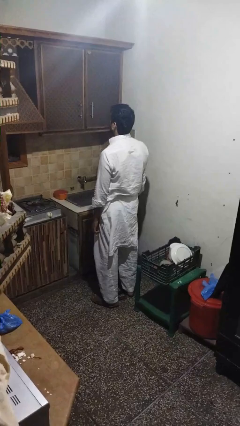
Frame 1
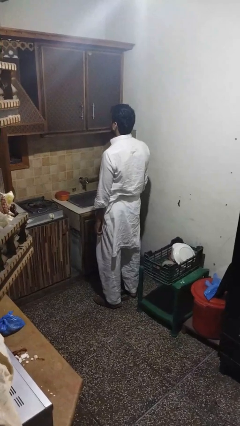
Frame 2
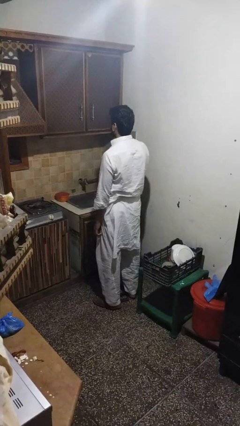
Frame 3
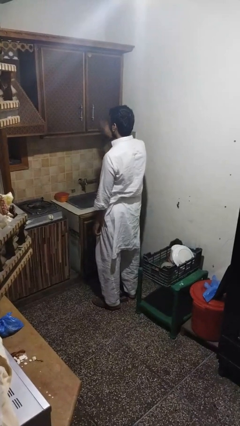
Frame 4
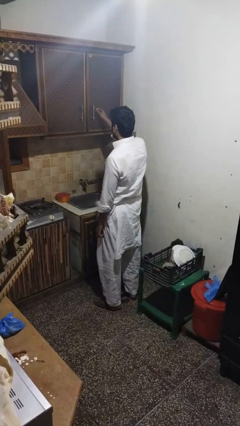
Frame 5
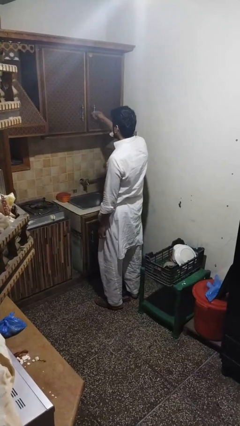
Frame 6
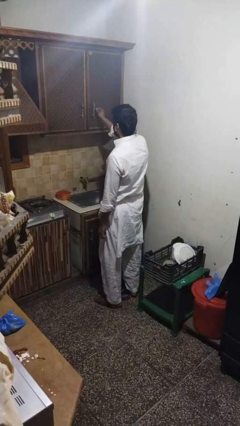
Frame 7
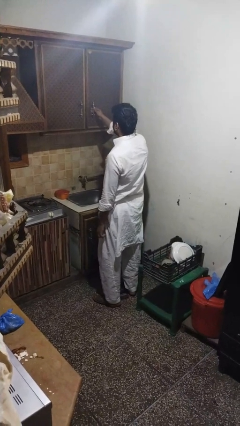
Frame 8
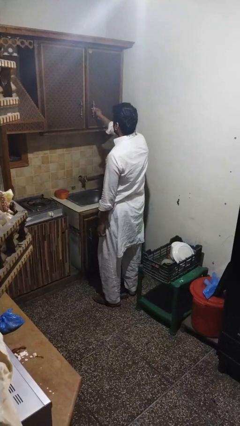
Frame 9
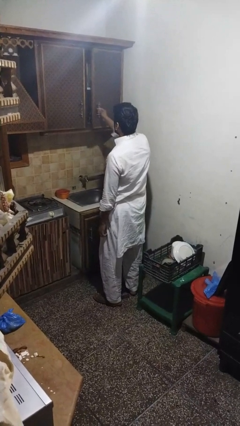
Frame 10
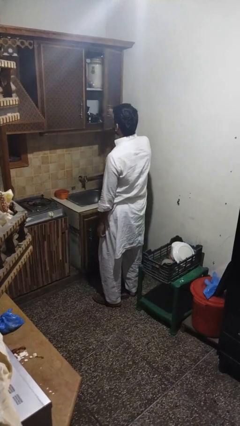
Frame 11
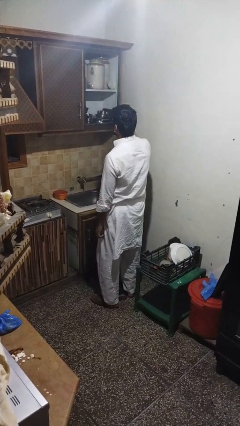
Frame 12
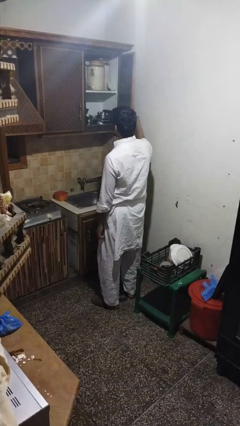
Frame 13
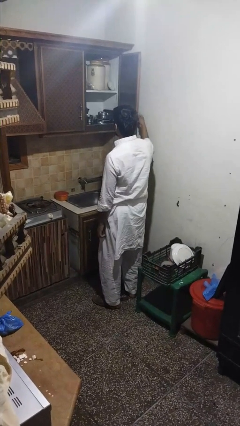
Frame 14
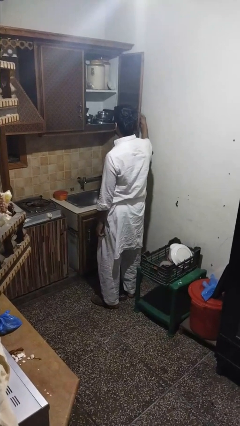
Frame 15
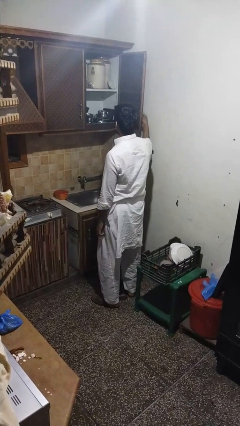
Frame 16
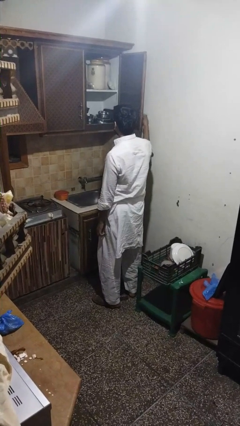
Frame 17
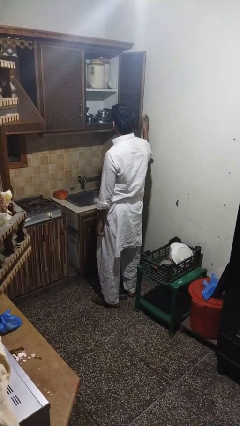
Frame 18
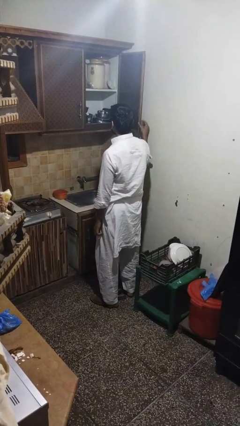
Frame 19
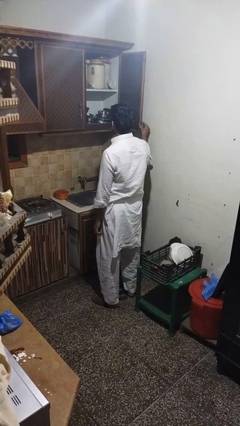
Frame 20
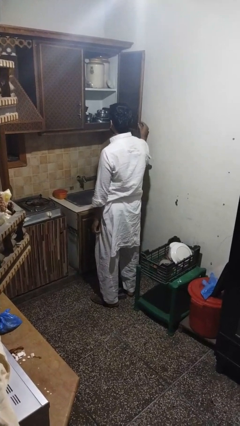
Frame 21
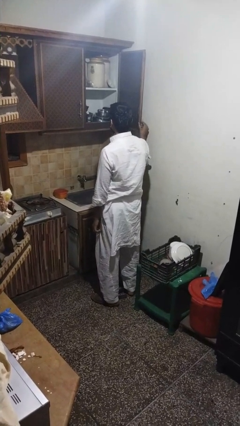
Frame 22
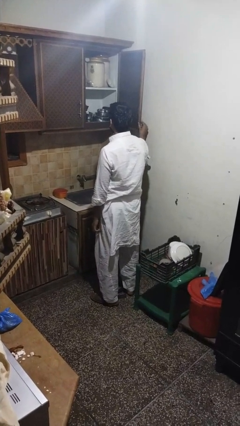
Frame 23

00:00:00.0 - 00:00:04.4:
person opens cabinet

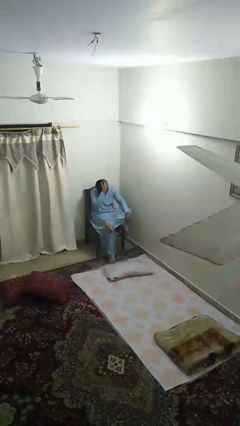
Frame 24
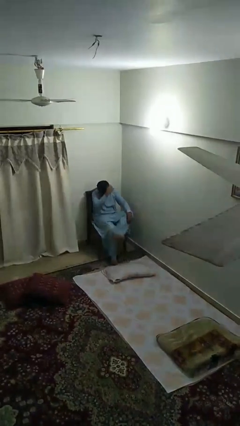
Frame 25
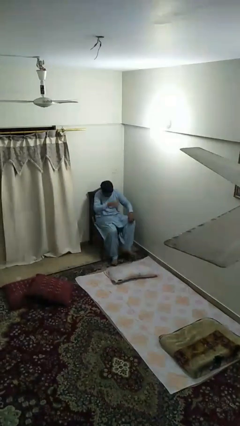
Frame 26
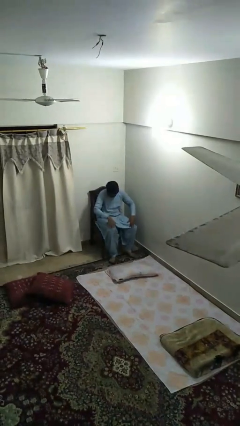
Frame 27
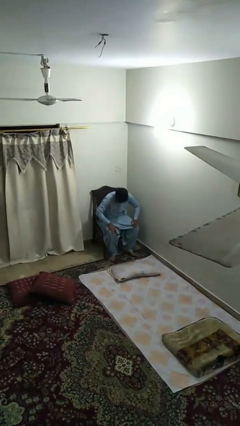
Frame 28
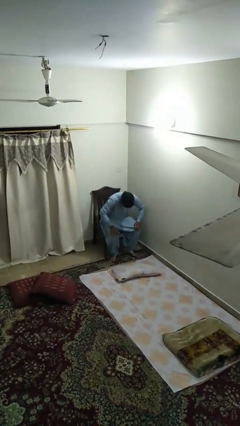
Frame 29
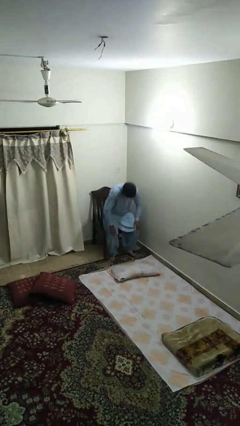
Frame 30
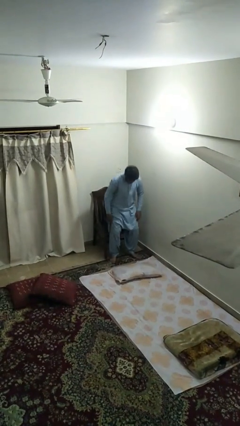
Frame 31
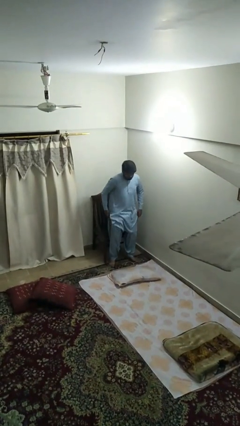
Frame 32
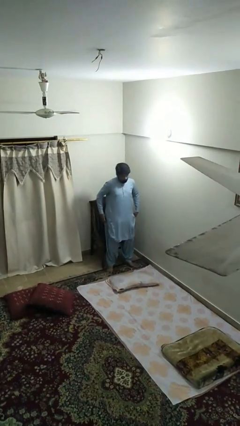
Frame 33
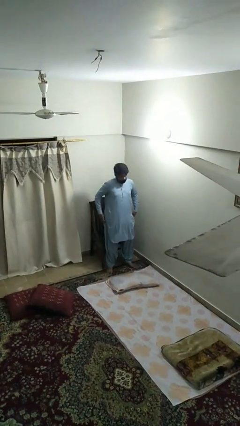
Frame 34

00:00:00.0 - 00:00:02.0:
person stands up

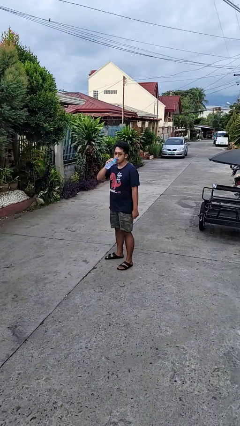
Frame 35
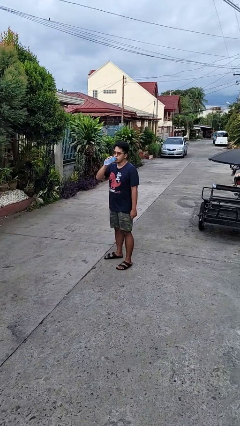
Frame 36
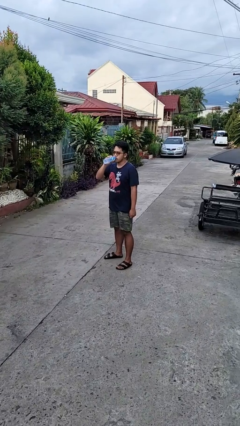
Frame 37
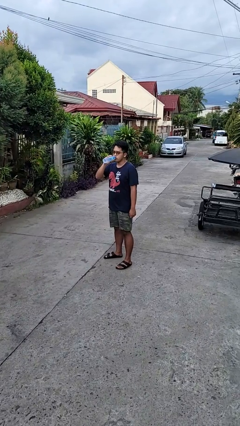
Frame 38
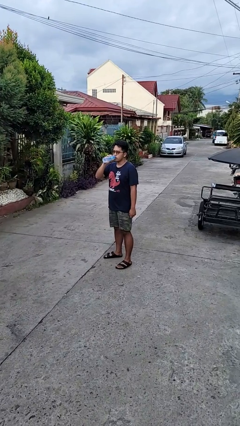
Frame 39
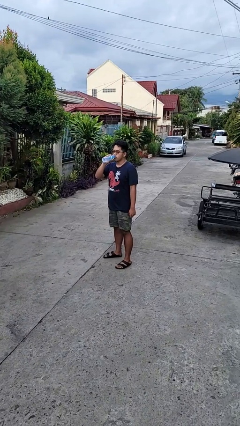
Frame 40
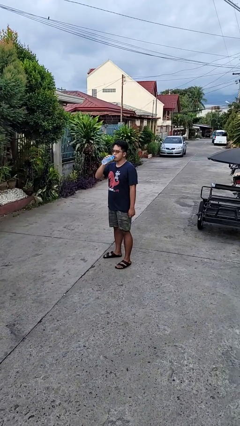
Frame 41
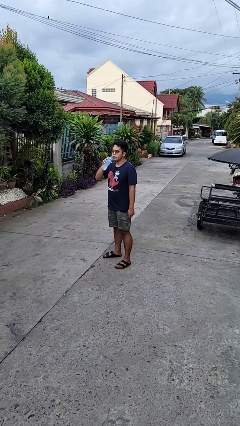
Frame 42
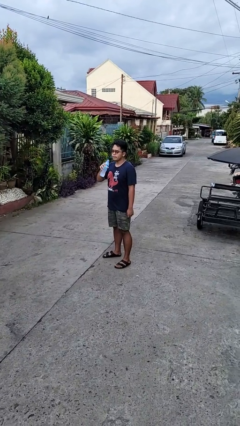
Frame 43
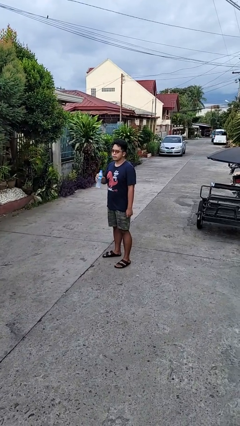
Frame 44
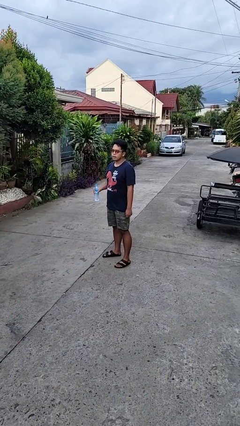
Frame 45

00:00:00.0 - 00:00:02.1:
person drinks from bottle

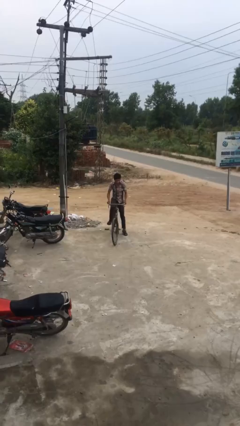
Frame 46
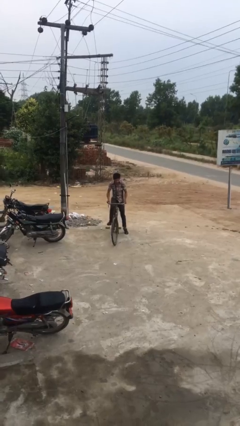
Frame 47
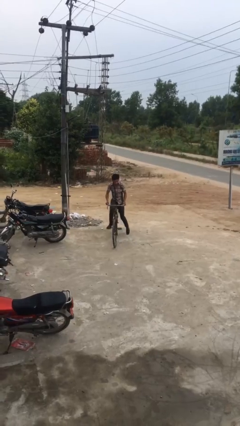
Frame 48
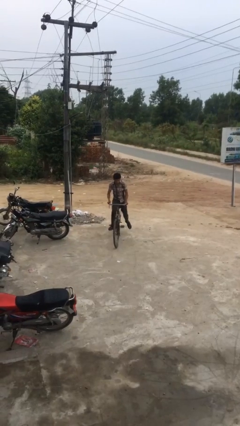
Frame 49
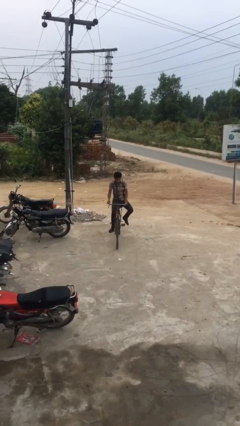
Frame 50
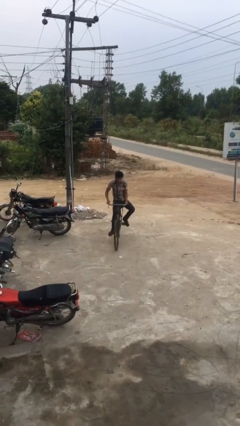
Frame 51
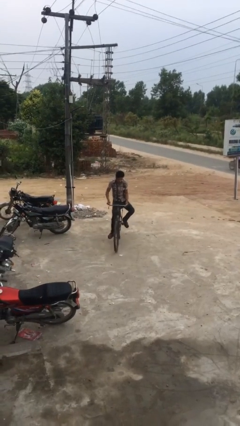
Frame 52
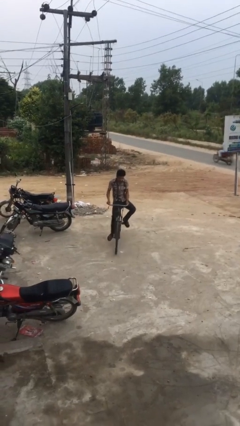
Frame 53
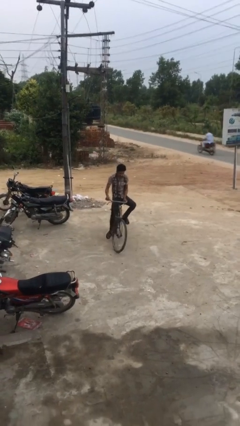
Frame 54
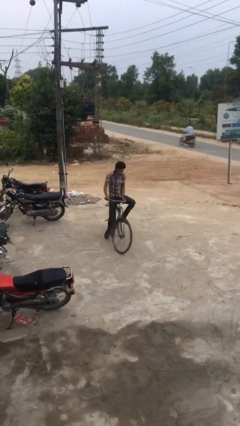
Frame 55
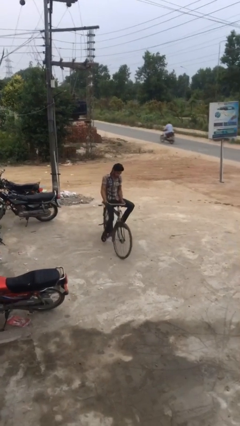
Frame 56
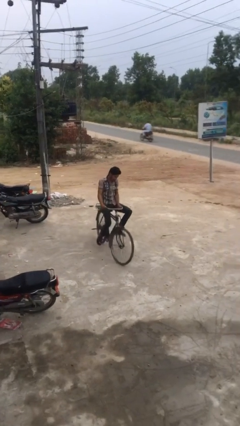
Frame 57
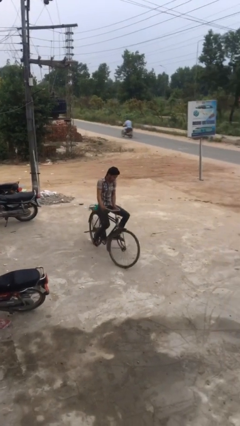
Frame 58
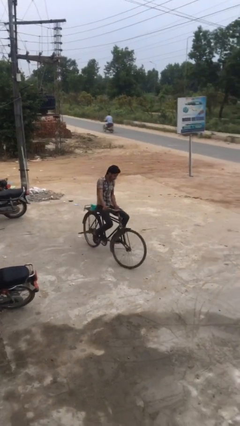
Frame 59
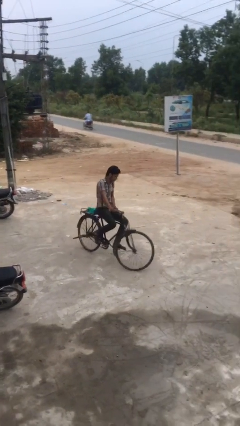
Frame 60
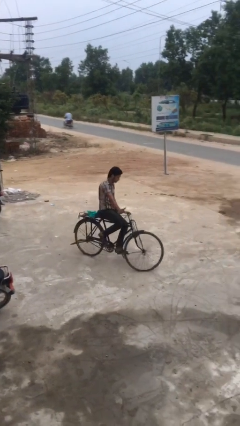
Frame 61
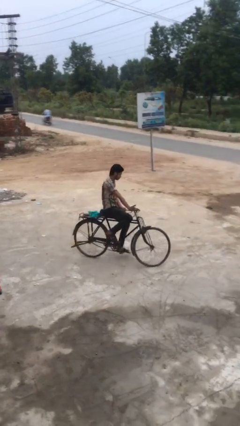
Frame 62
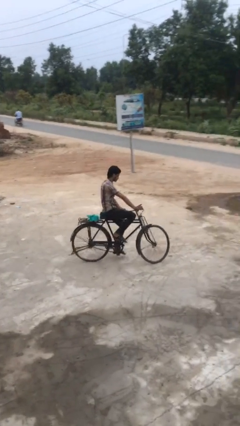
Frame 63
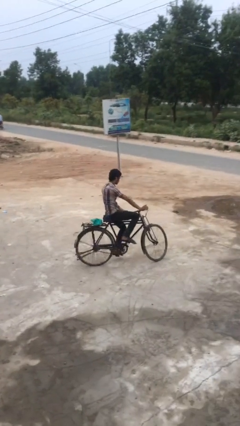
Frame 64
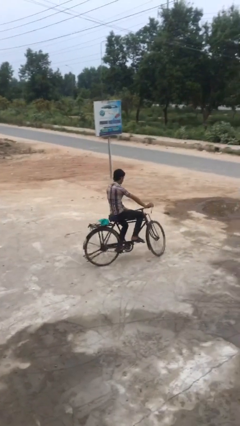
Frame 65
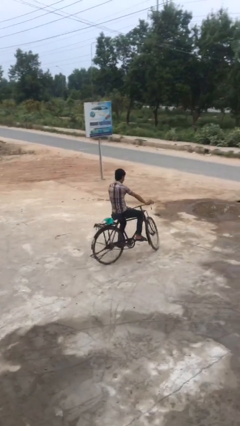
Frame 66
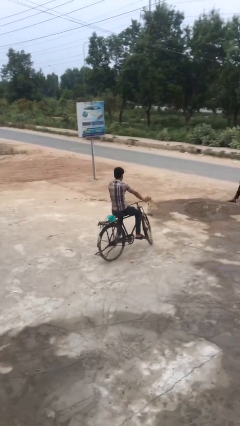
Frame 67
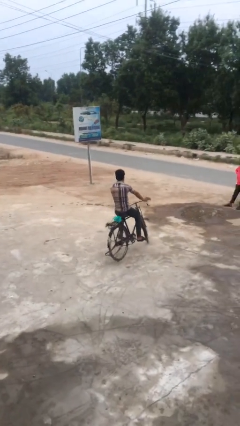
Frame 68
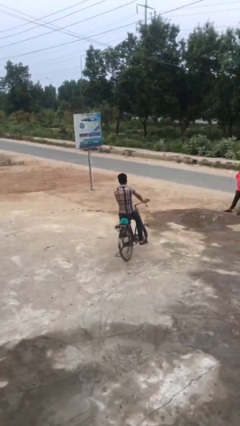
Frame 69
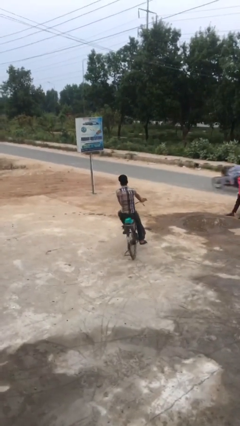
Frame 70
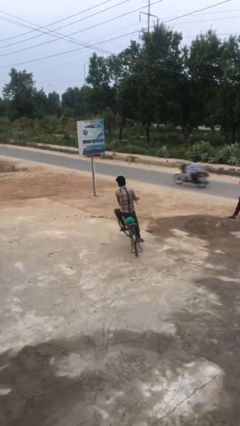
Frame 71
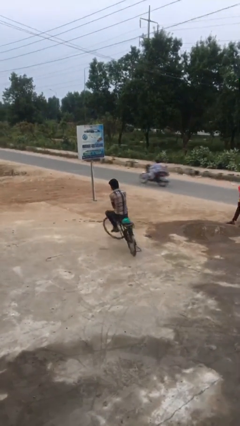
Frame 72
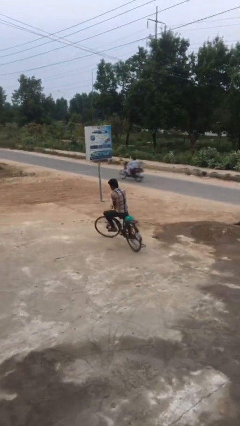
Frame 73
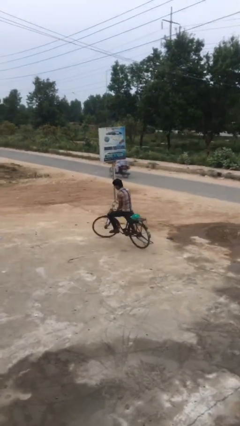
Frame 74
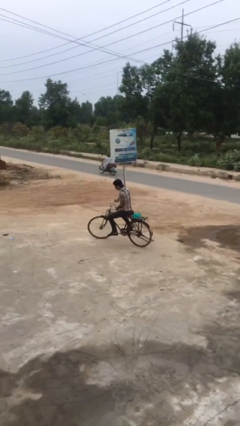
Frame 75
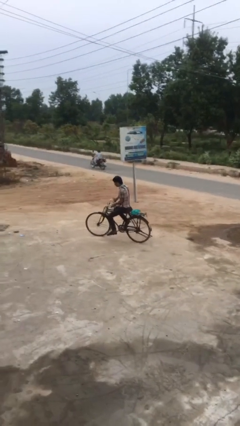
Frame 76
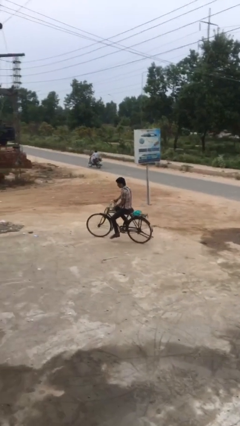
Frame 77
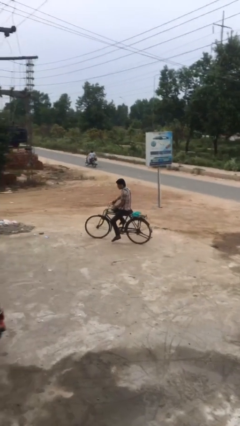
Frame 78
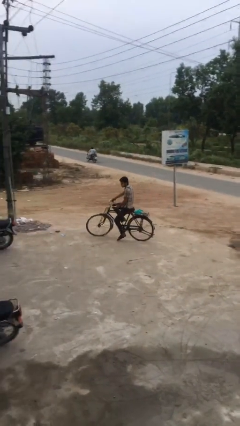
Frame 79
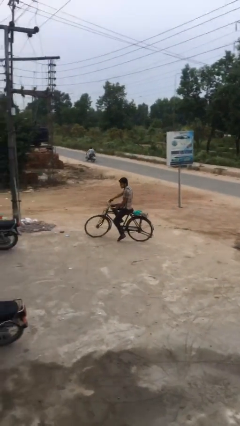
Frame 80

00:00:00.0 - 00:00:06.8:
person rides bicycle

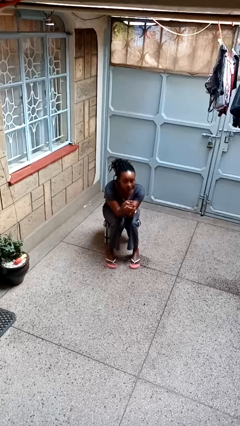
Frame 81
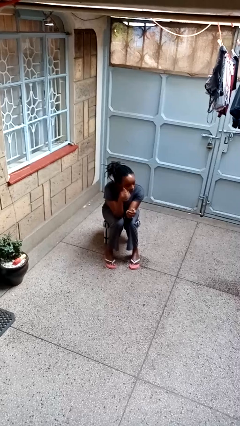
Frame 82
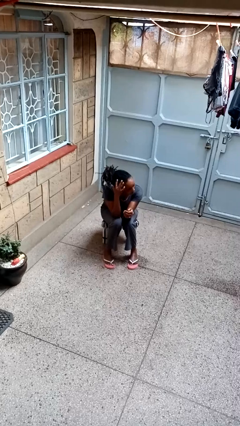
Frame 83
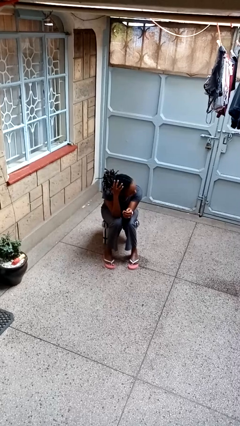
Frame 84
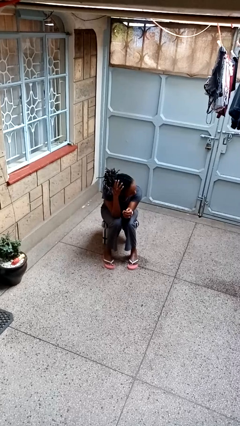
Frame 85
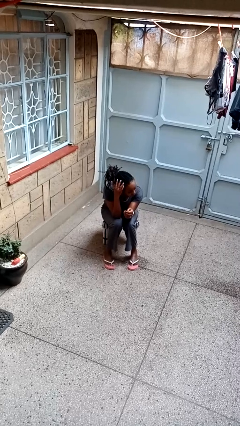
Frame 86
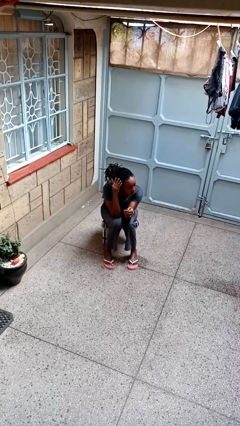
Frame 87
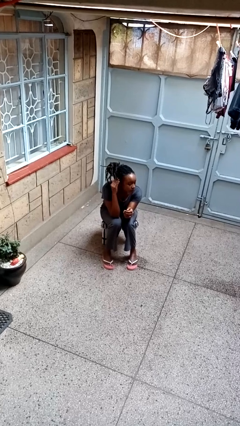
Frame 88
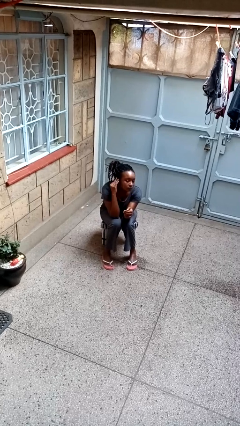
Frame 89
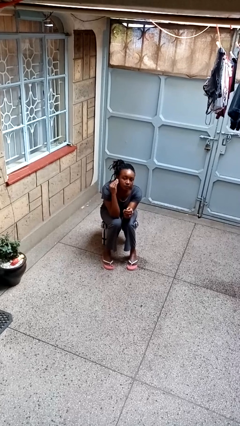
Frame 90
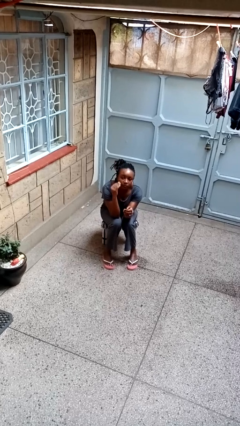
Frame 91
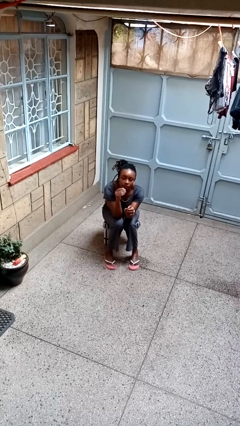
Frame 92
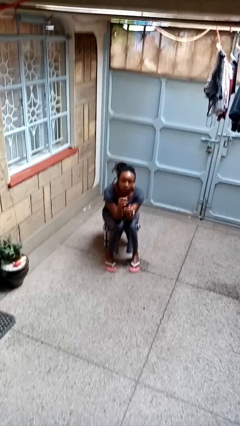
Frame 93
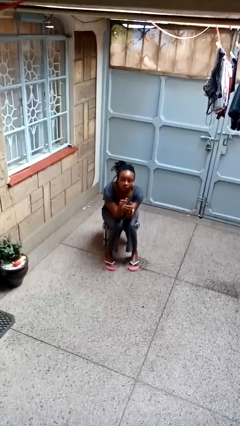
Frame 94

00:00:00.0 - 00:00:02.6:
person strokes hair
